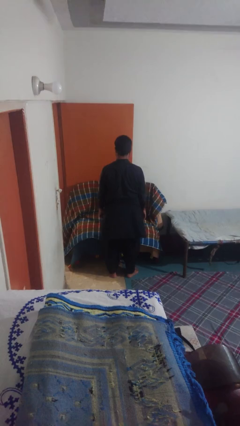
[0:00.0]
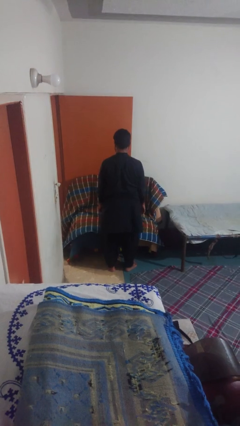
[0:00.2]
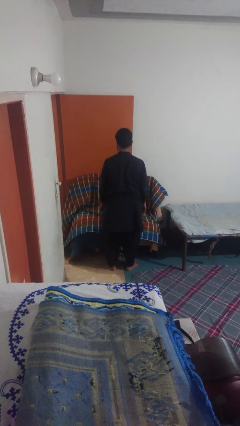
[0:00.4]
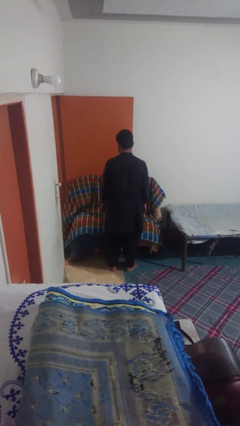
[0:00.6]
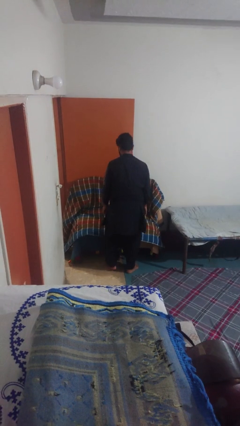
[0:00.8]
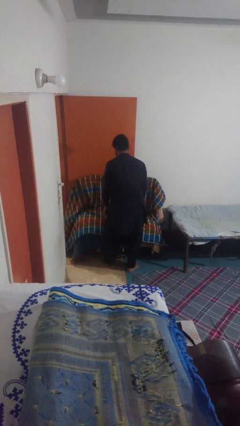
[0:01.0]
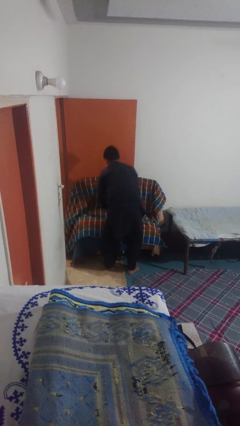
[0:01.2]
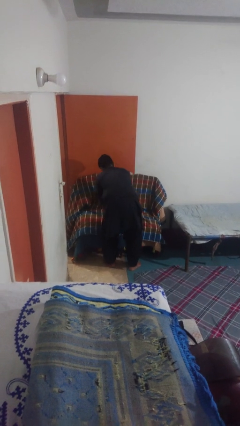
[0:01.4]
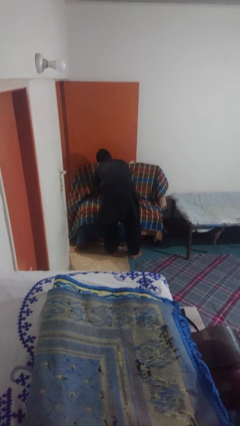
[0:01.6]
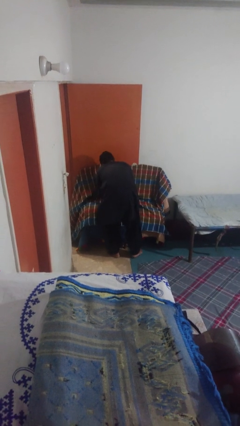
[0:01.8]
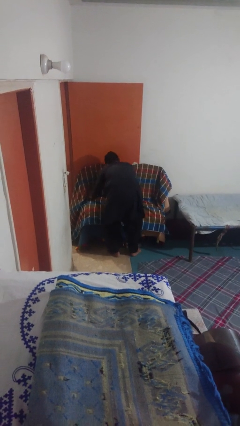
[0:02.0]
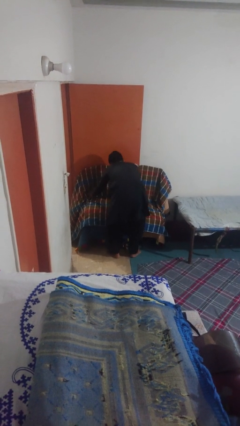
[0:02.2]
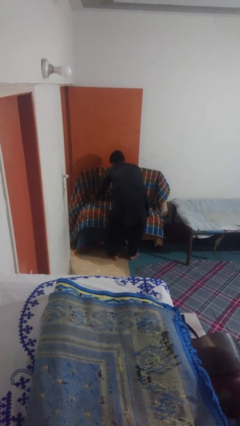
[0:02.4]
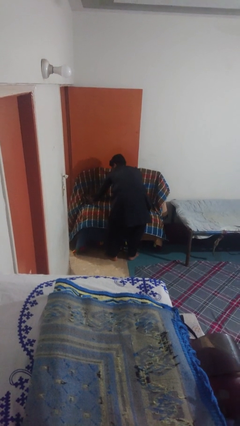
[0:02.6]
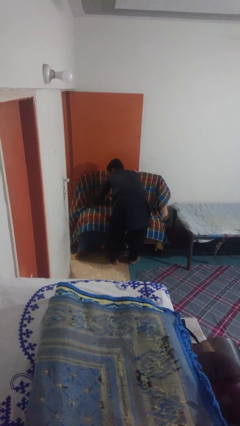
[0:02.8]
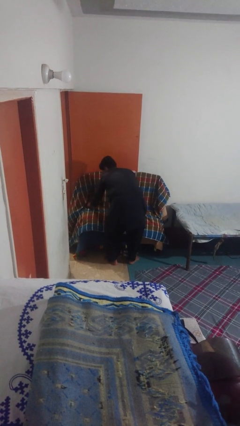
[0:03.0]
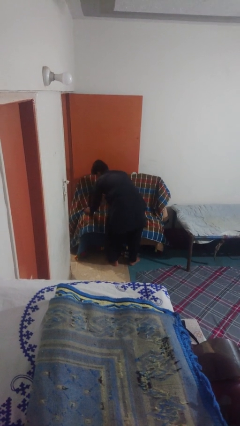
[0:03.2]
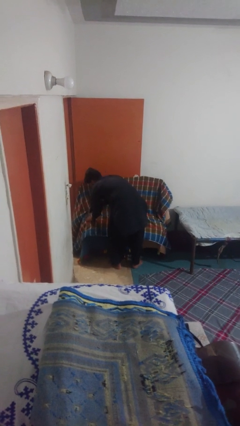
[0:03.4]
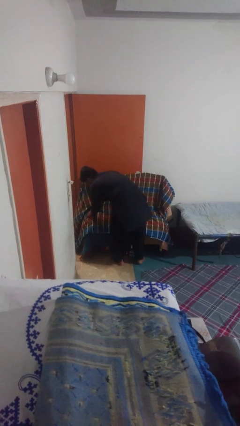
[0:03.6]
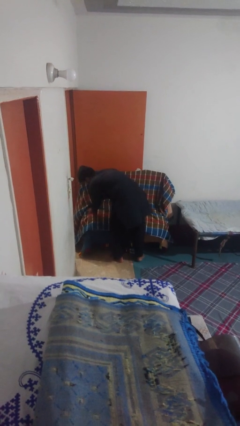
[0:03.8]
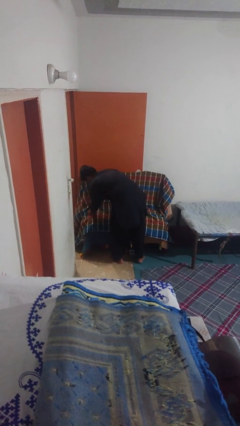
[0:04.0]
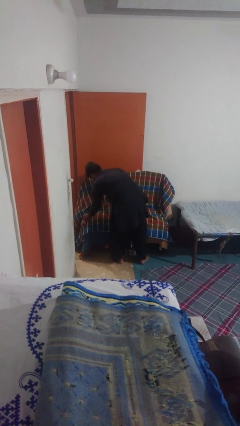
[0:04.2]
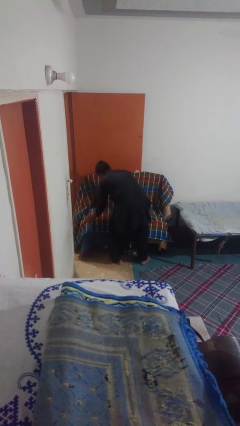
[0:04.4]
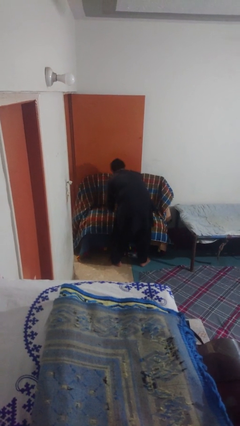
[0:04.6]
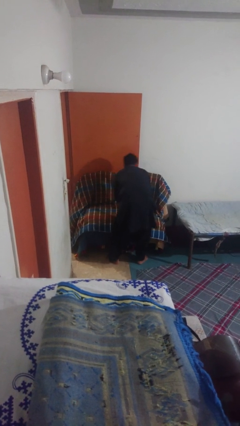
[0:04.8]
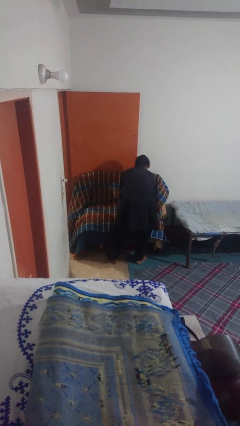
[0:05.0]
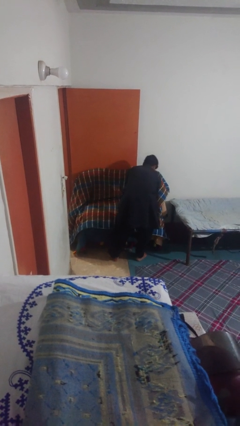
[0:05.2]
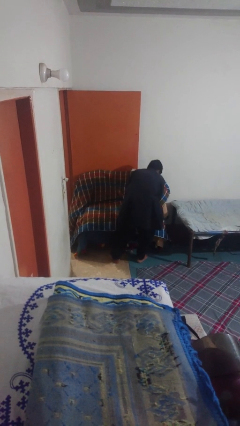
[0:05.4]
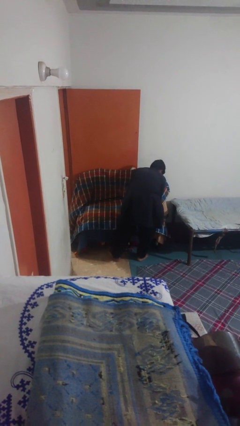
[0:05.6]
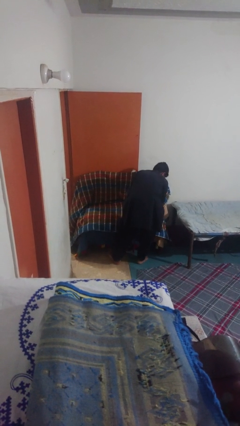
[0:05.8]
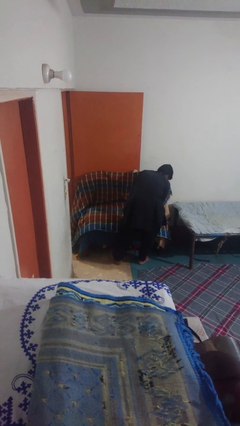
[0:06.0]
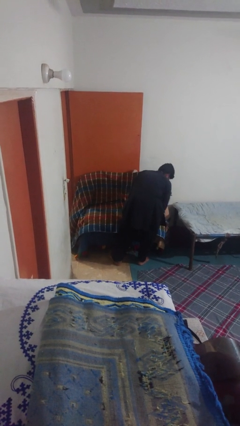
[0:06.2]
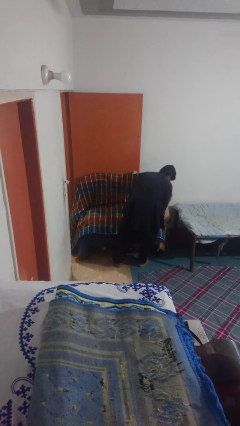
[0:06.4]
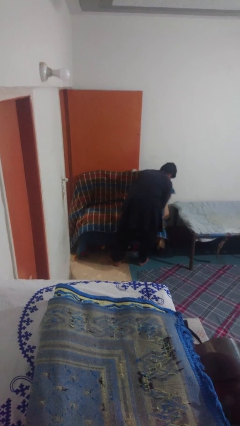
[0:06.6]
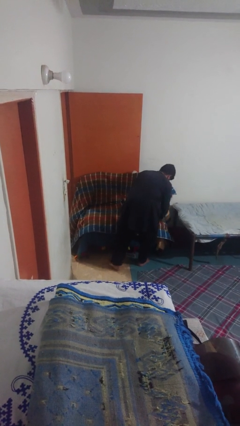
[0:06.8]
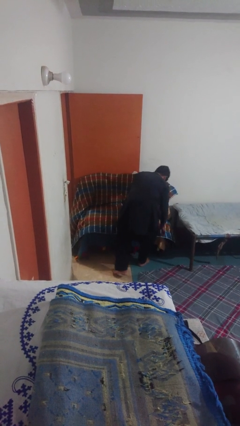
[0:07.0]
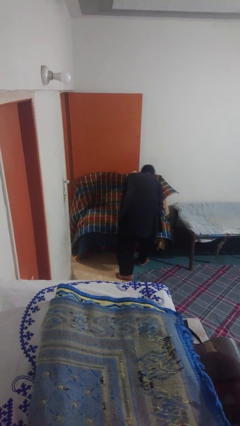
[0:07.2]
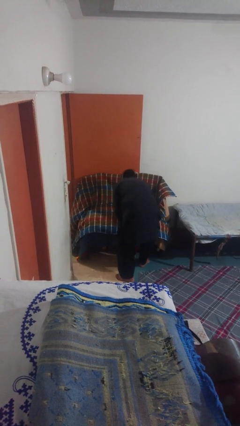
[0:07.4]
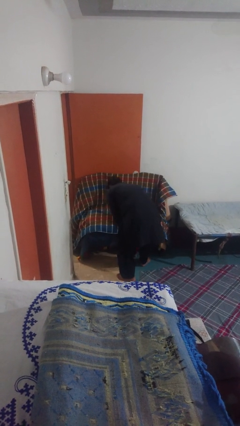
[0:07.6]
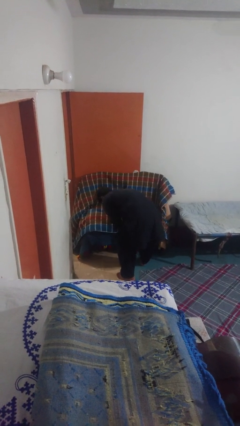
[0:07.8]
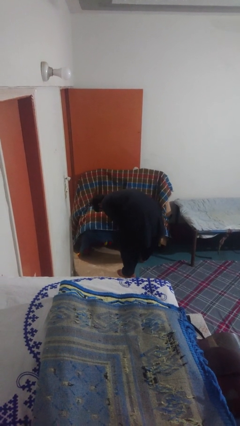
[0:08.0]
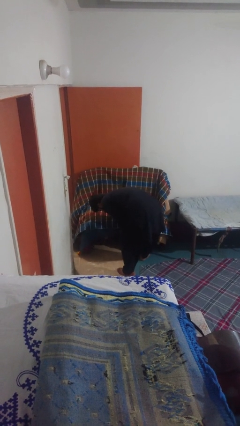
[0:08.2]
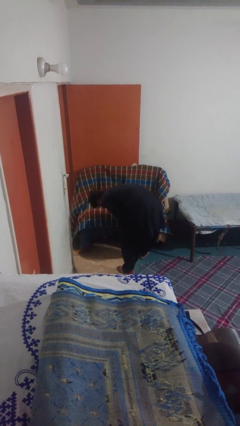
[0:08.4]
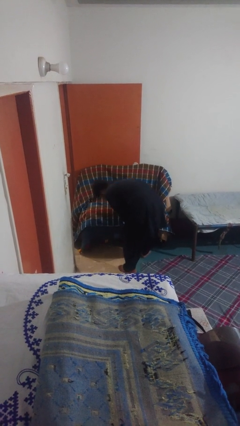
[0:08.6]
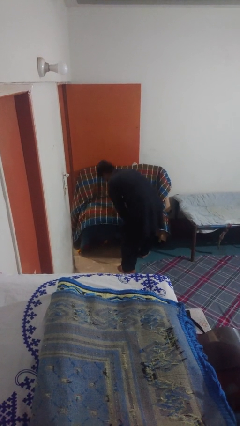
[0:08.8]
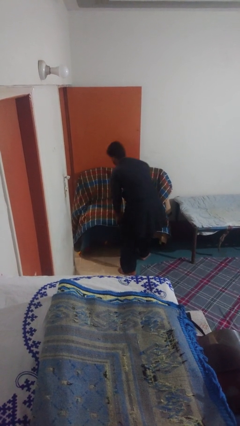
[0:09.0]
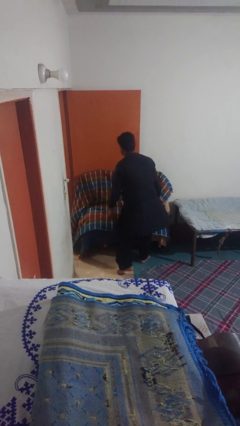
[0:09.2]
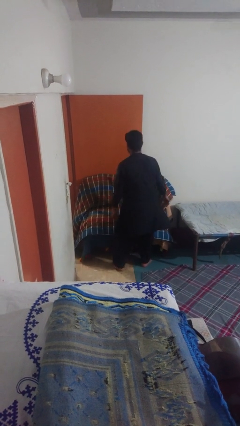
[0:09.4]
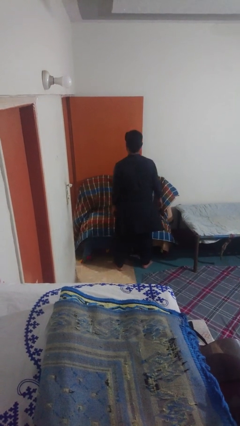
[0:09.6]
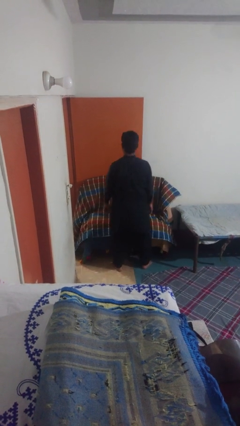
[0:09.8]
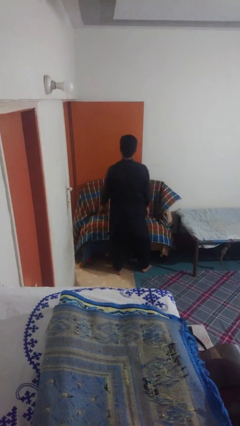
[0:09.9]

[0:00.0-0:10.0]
person searches in couch

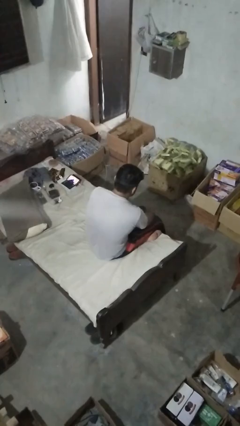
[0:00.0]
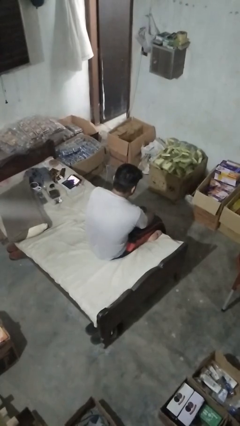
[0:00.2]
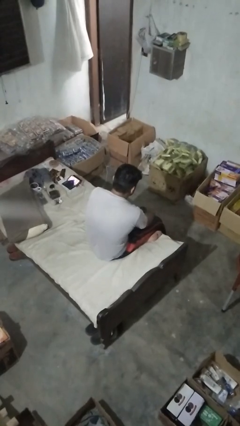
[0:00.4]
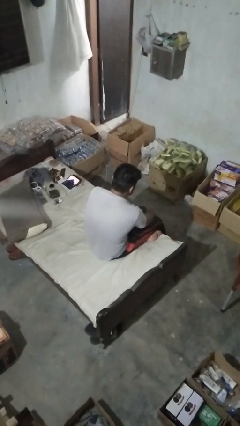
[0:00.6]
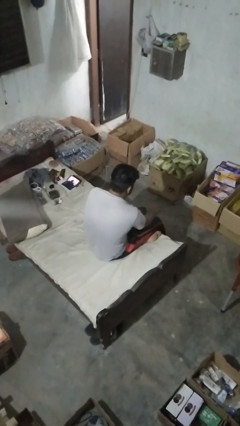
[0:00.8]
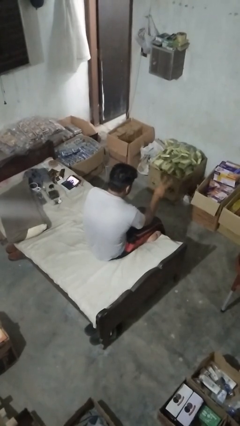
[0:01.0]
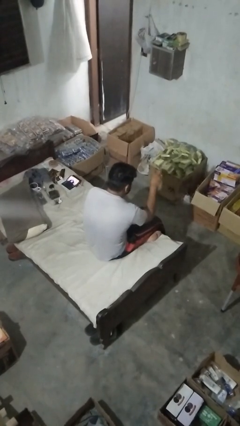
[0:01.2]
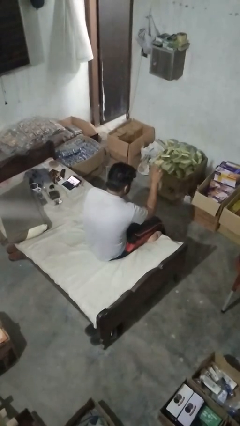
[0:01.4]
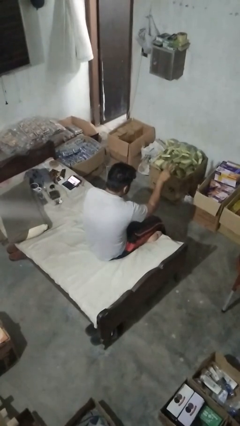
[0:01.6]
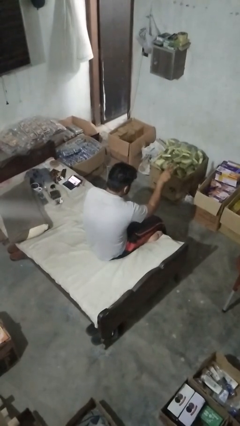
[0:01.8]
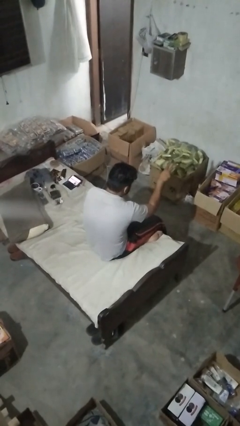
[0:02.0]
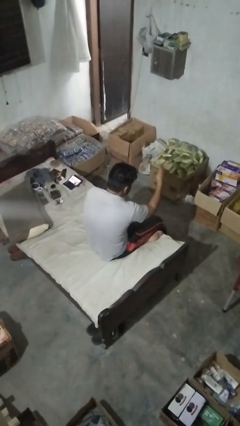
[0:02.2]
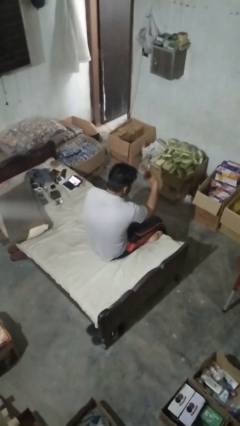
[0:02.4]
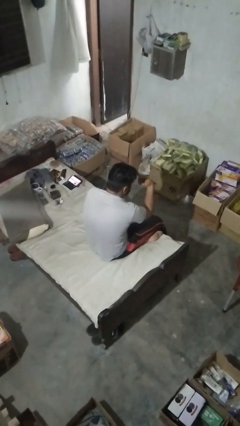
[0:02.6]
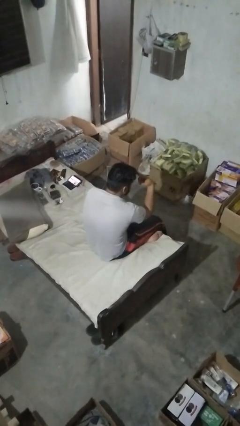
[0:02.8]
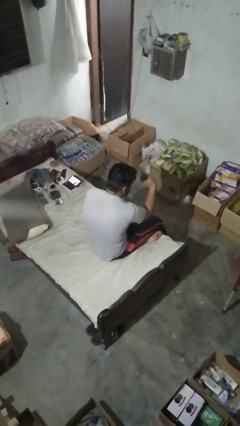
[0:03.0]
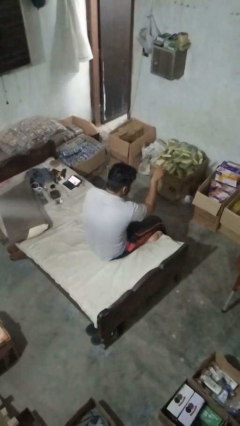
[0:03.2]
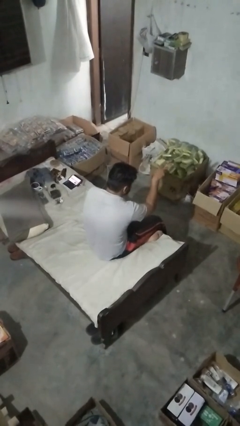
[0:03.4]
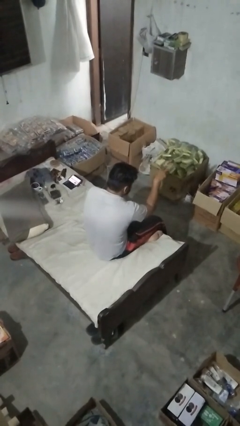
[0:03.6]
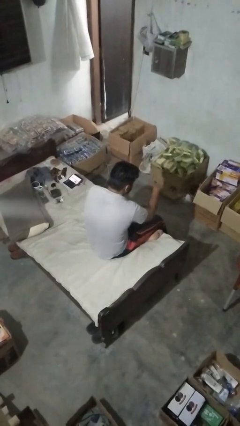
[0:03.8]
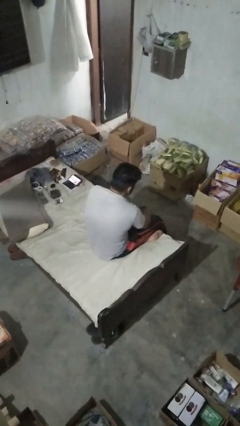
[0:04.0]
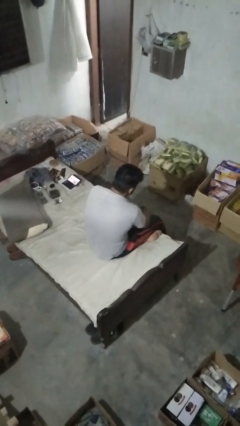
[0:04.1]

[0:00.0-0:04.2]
person gestures watch closely

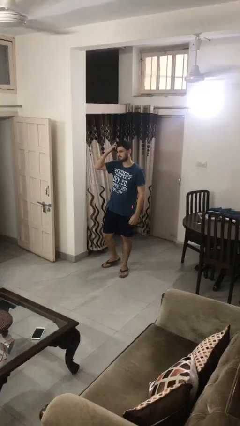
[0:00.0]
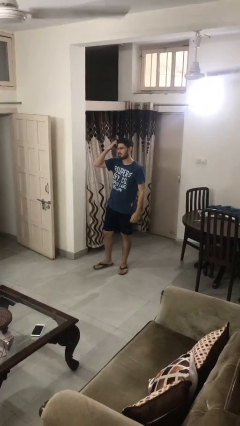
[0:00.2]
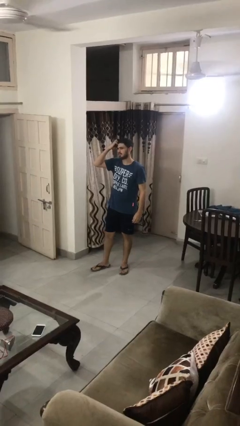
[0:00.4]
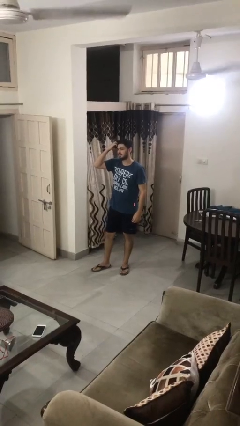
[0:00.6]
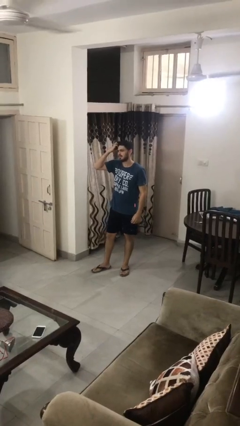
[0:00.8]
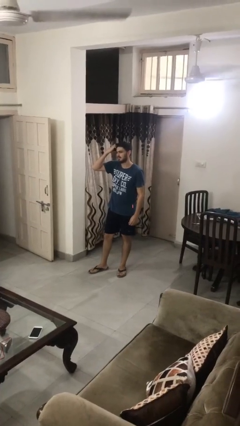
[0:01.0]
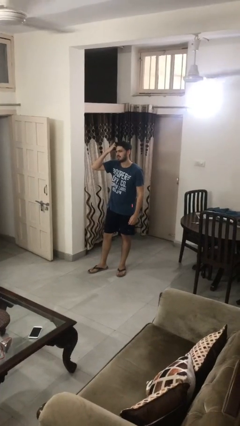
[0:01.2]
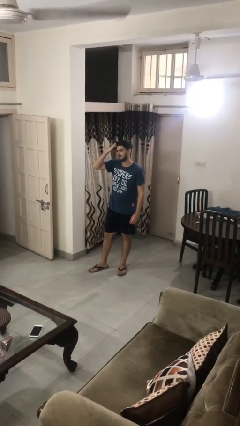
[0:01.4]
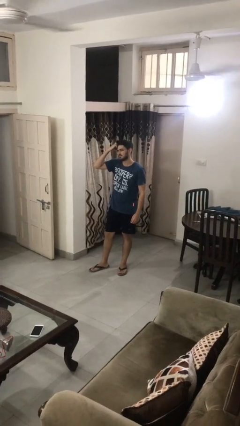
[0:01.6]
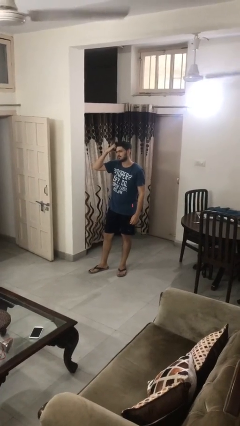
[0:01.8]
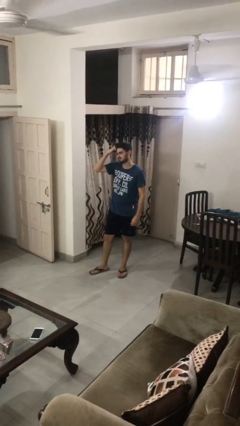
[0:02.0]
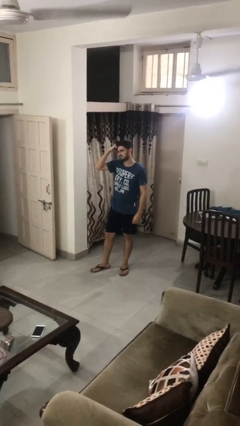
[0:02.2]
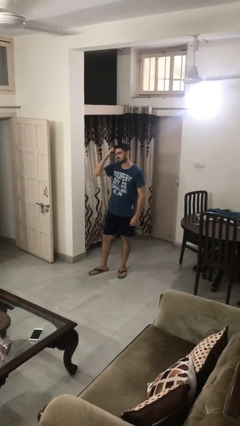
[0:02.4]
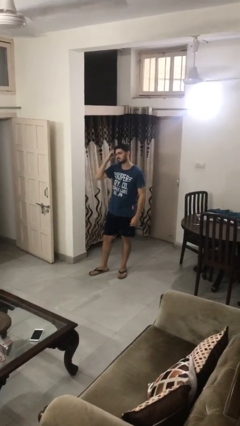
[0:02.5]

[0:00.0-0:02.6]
person scratches face

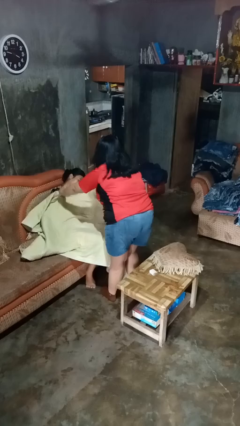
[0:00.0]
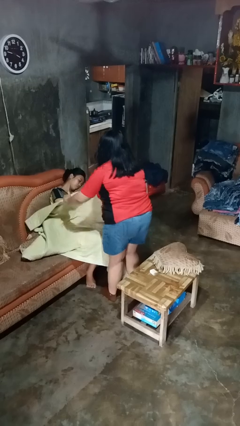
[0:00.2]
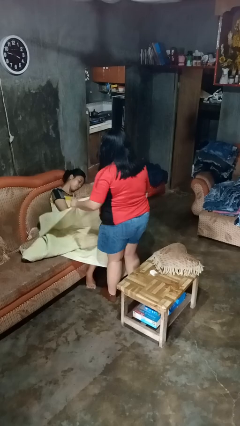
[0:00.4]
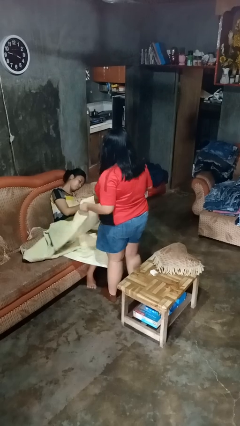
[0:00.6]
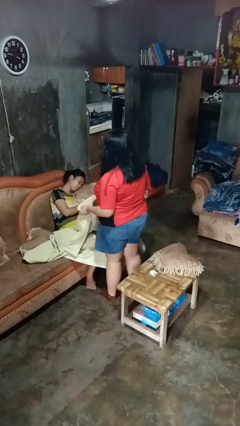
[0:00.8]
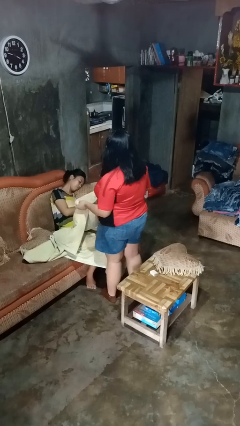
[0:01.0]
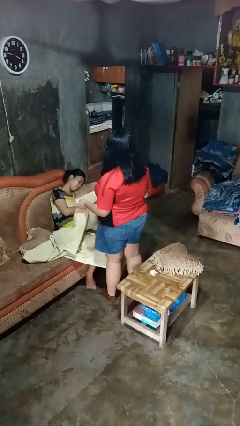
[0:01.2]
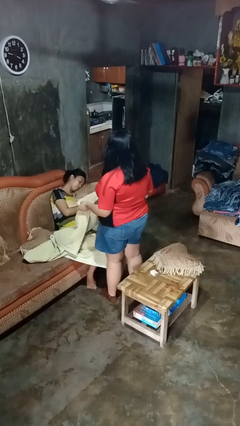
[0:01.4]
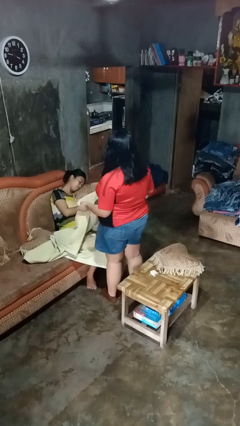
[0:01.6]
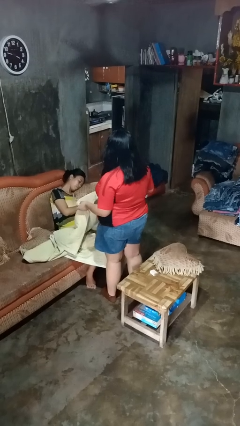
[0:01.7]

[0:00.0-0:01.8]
person uncovers friend with blanket
